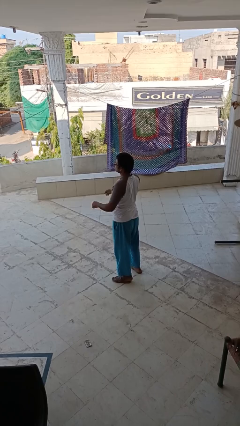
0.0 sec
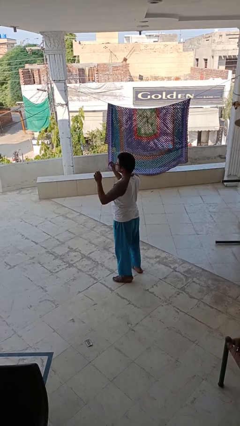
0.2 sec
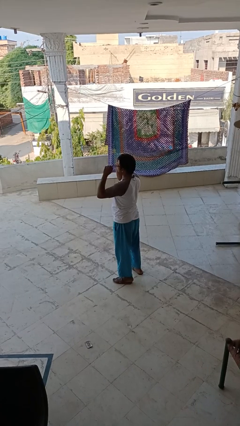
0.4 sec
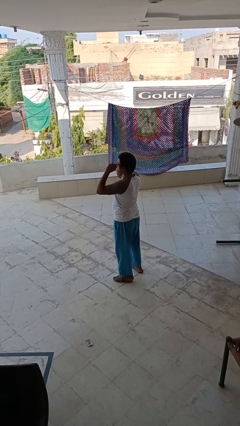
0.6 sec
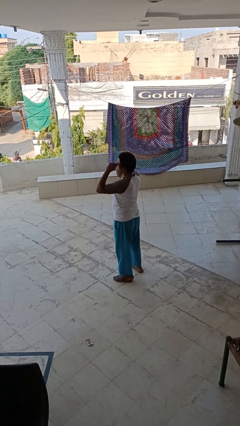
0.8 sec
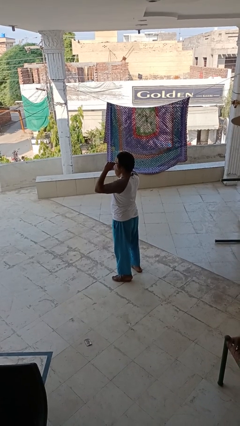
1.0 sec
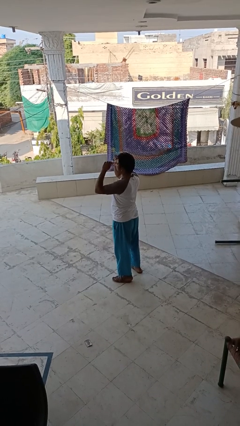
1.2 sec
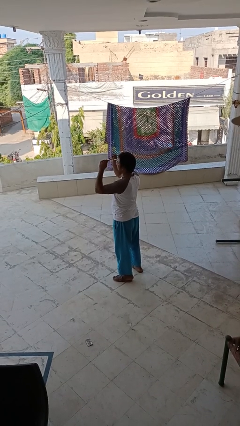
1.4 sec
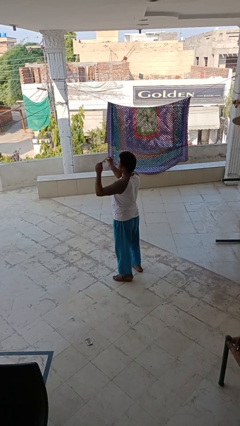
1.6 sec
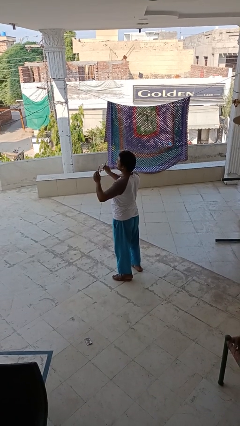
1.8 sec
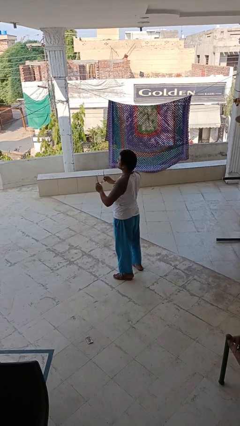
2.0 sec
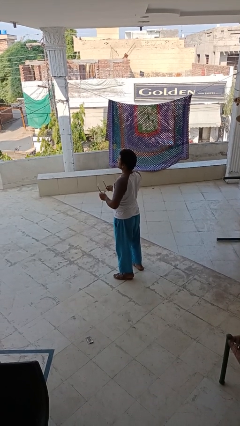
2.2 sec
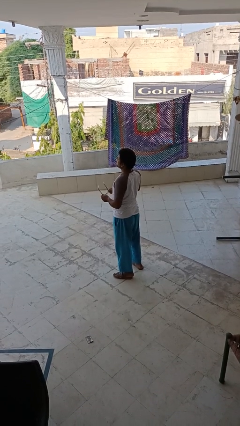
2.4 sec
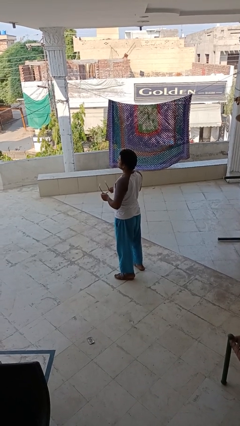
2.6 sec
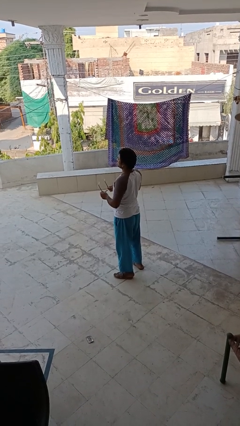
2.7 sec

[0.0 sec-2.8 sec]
person takes off glasses

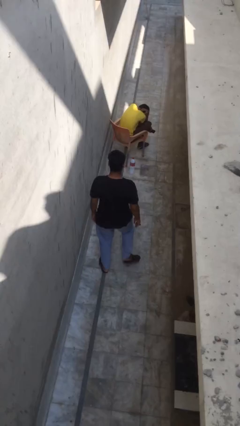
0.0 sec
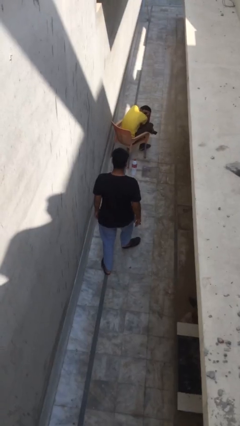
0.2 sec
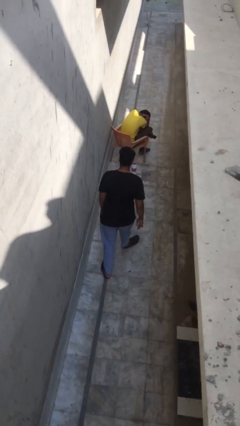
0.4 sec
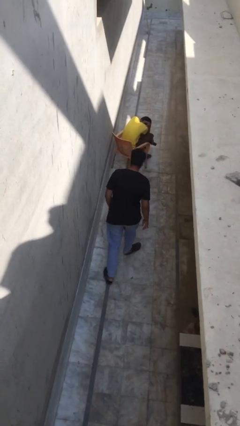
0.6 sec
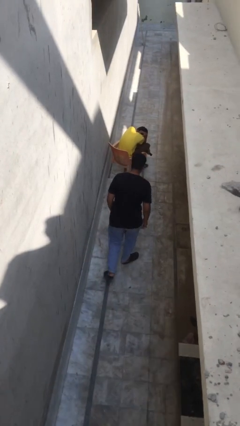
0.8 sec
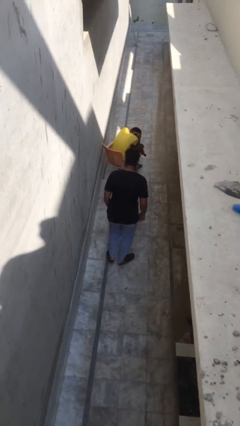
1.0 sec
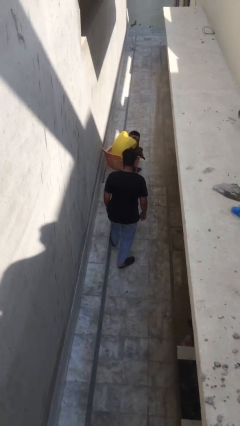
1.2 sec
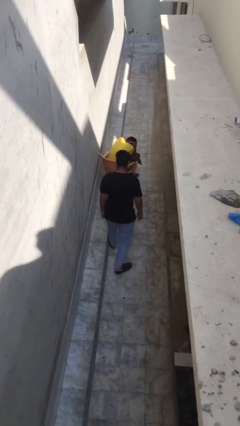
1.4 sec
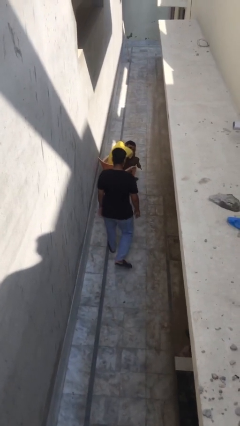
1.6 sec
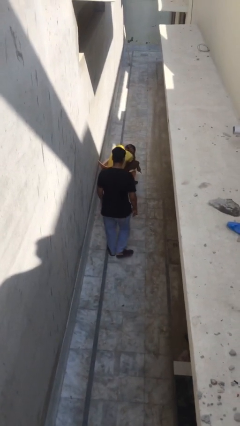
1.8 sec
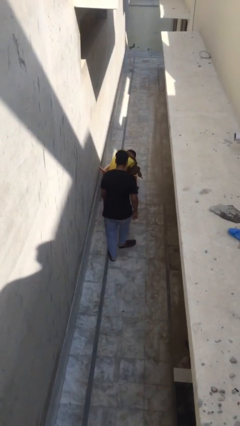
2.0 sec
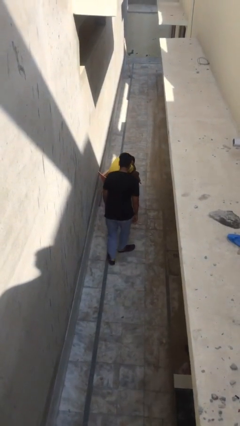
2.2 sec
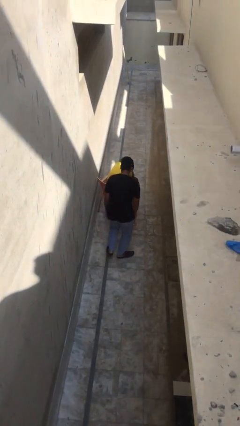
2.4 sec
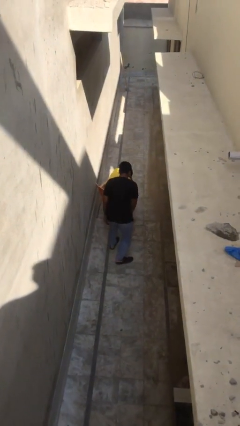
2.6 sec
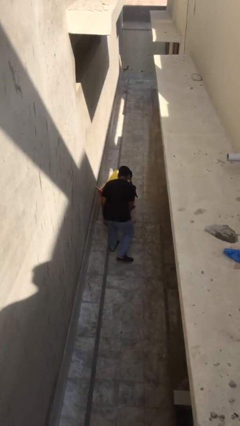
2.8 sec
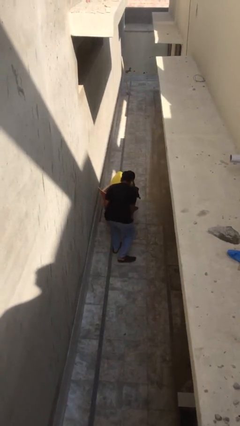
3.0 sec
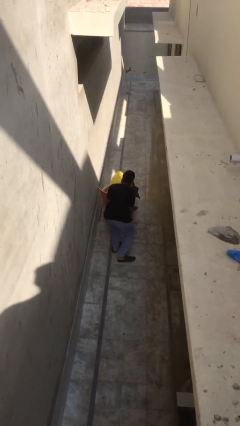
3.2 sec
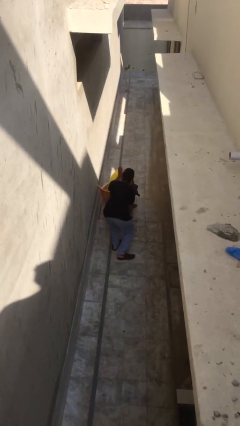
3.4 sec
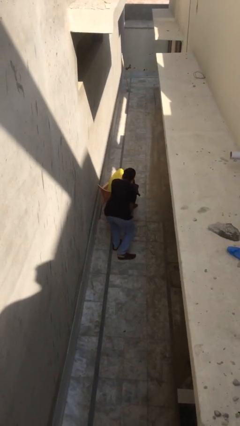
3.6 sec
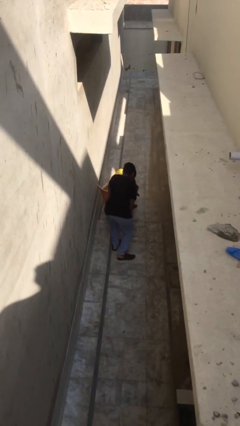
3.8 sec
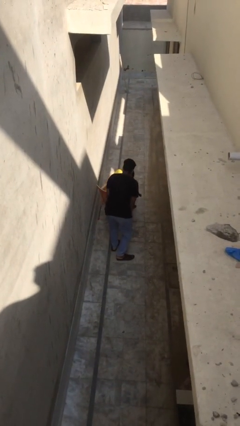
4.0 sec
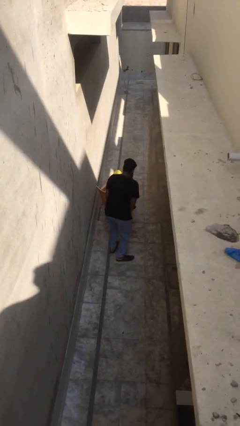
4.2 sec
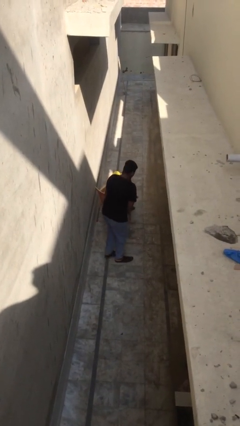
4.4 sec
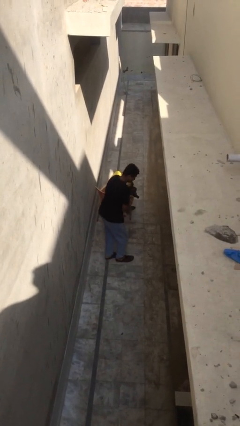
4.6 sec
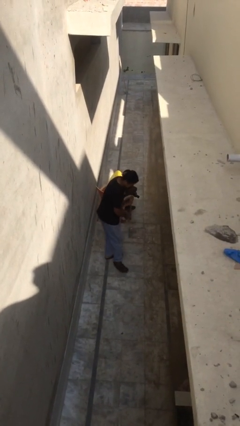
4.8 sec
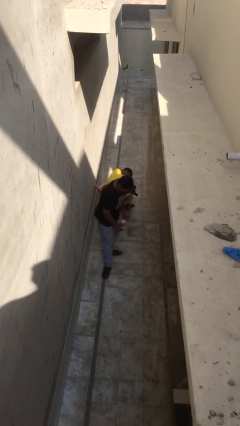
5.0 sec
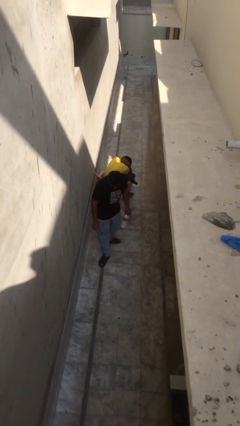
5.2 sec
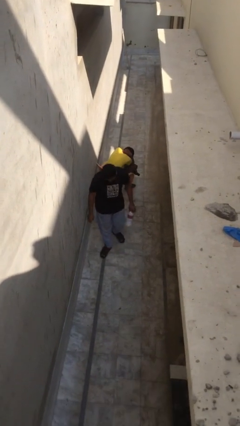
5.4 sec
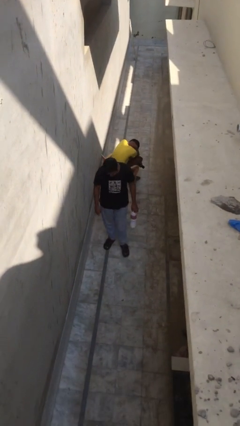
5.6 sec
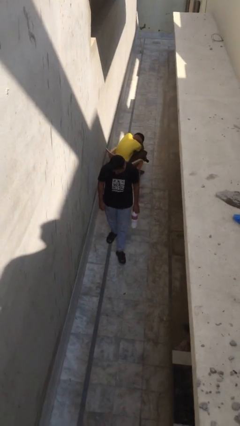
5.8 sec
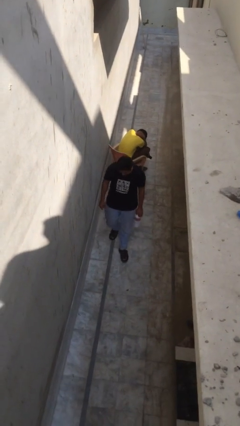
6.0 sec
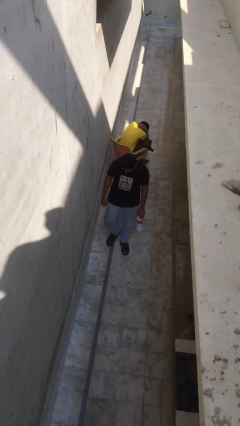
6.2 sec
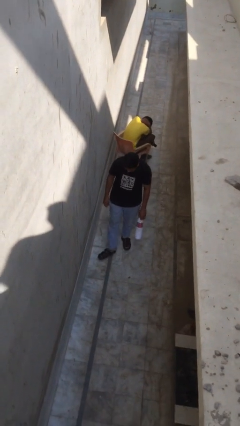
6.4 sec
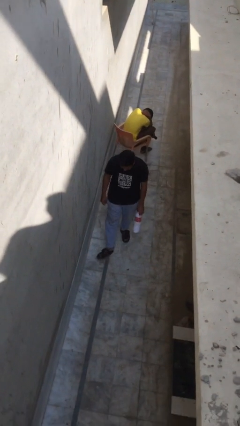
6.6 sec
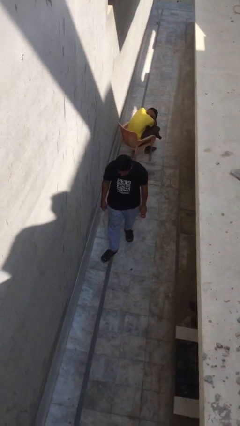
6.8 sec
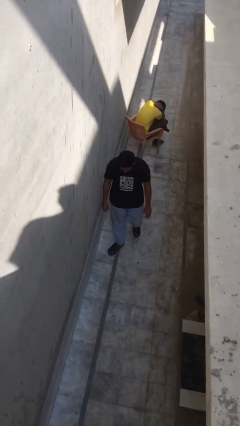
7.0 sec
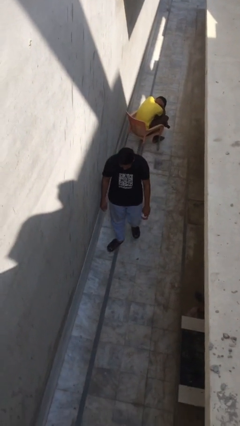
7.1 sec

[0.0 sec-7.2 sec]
person steals object from person

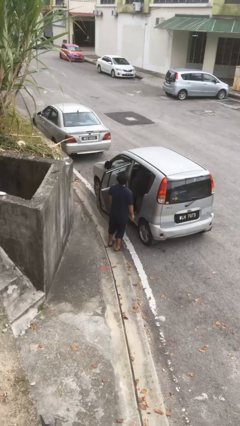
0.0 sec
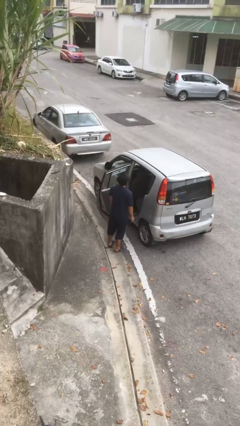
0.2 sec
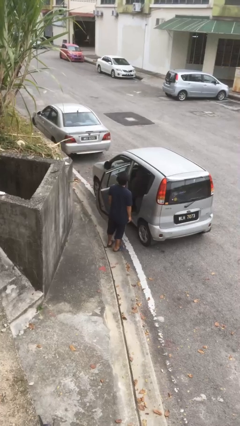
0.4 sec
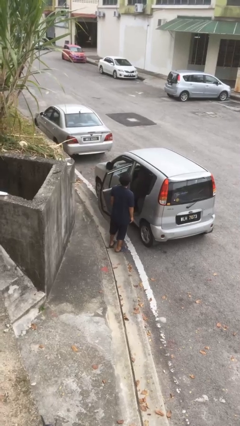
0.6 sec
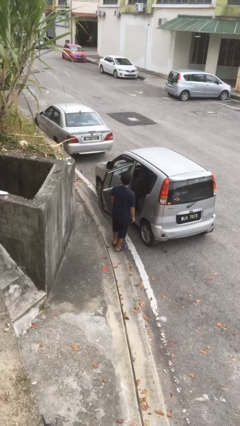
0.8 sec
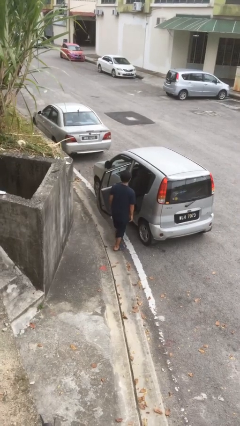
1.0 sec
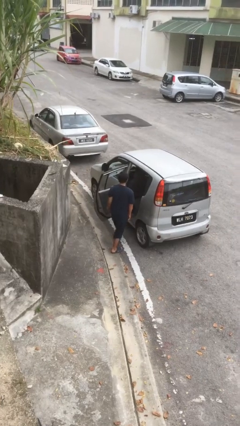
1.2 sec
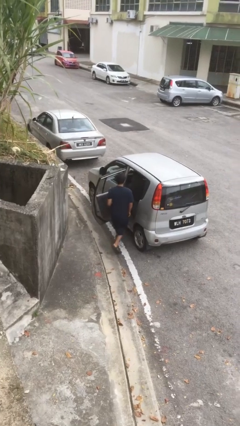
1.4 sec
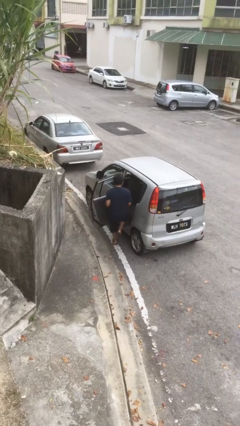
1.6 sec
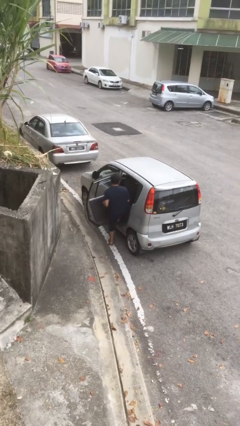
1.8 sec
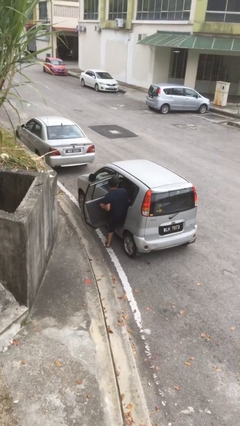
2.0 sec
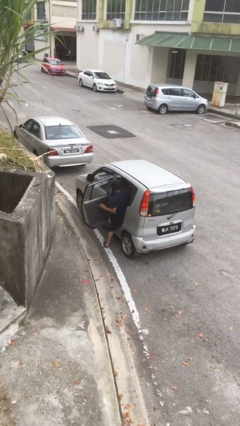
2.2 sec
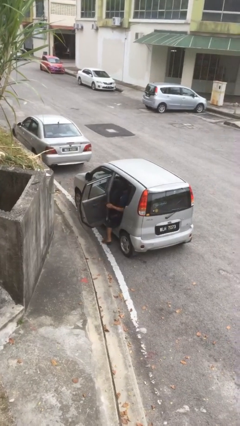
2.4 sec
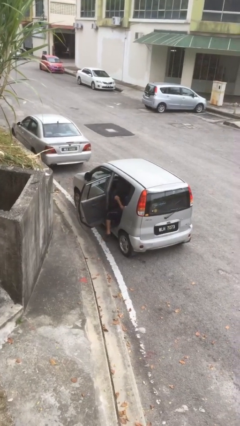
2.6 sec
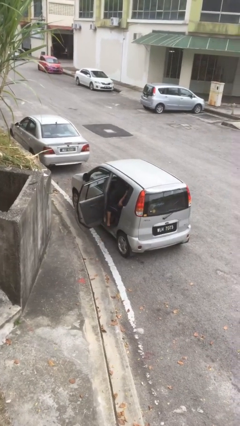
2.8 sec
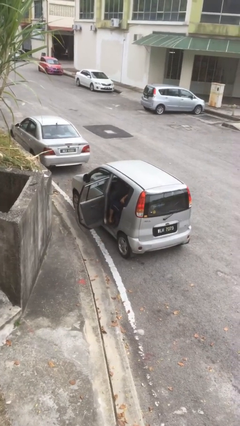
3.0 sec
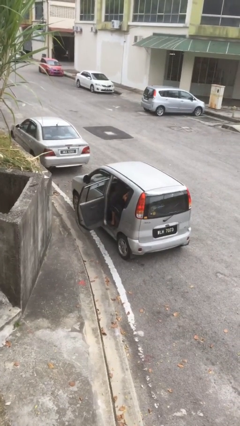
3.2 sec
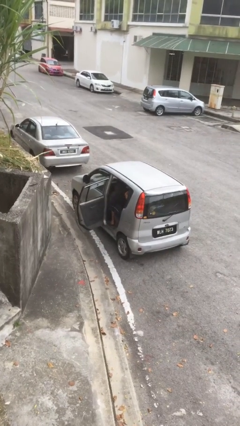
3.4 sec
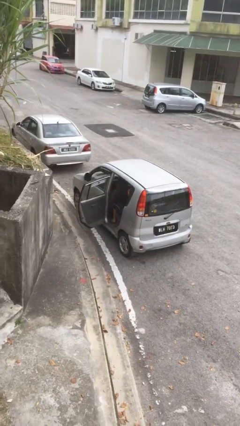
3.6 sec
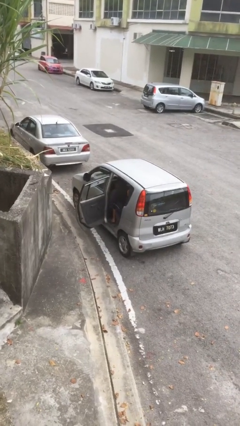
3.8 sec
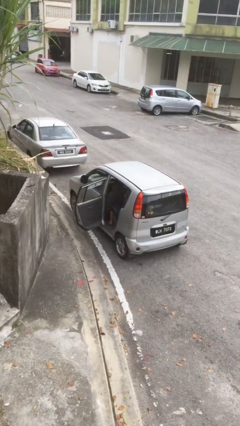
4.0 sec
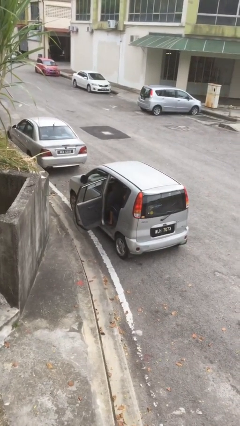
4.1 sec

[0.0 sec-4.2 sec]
person enters car

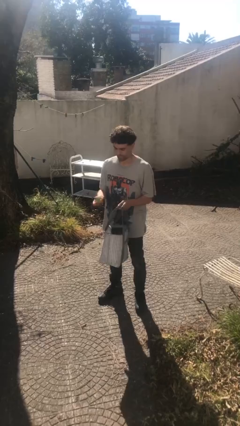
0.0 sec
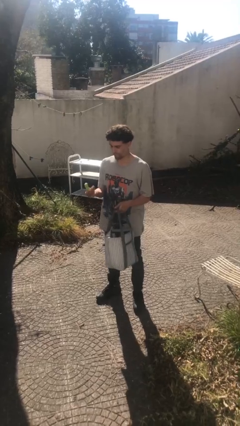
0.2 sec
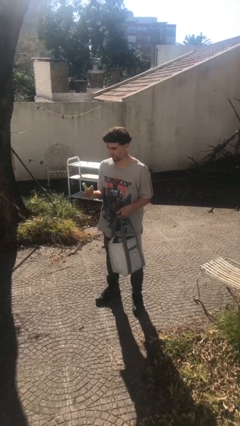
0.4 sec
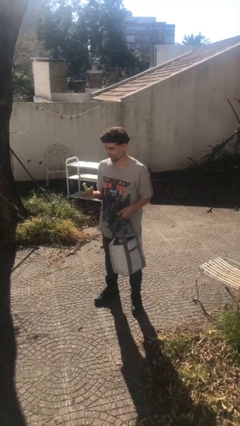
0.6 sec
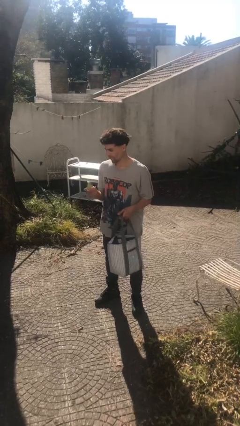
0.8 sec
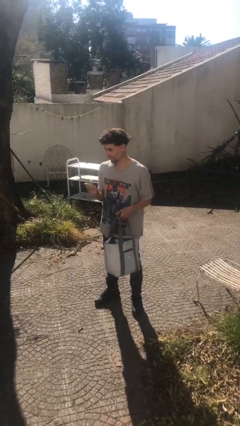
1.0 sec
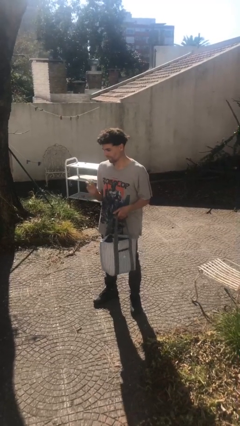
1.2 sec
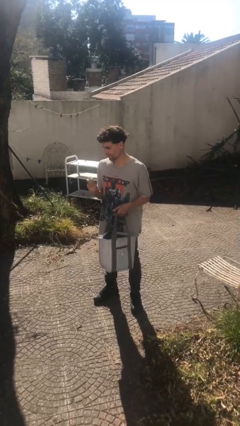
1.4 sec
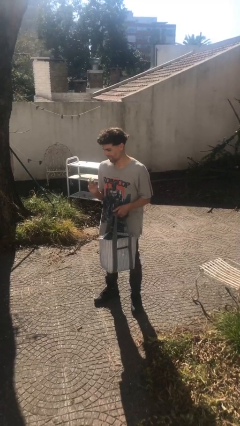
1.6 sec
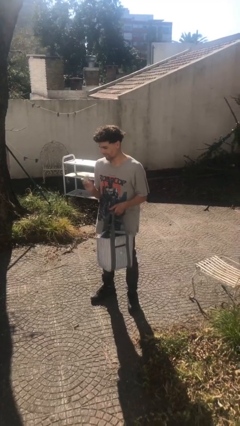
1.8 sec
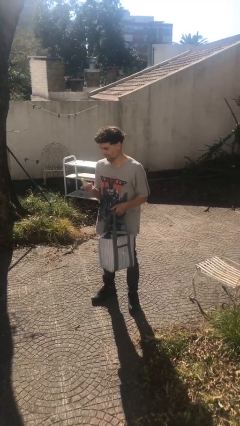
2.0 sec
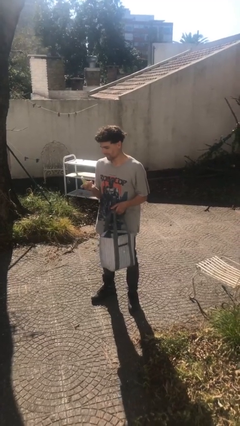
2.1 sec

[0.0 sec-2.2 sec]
person takes object from purse

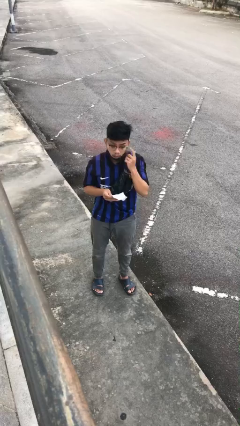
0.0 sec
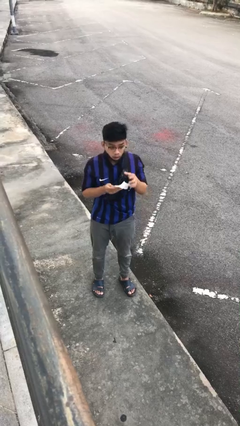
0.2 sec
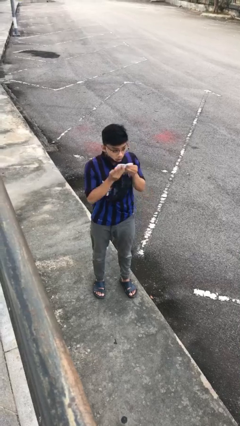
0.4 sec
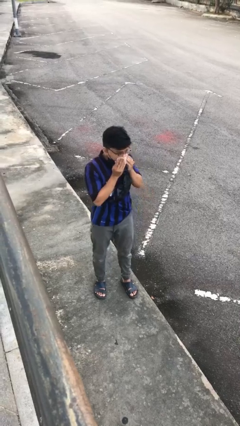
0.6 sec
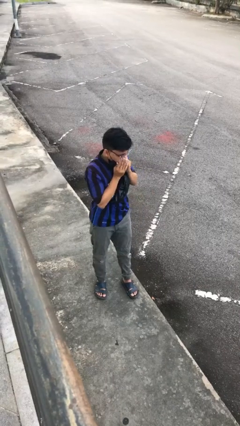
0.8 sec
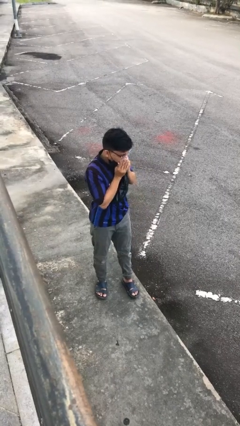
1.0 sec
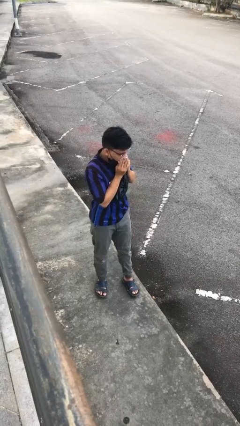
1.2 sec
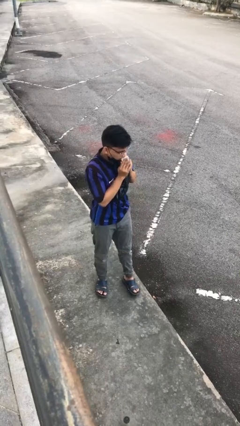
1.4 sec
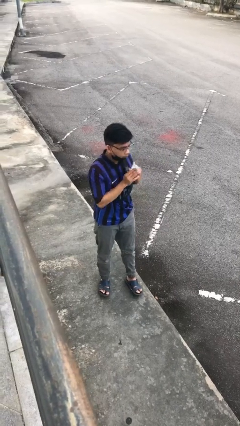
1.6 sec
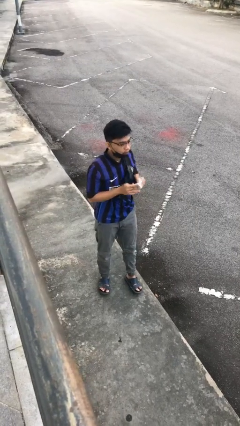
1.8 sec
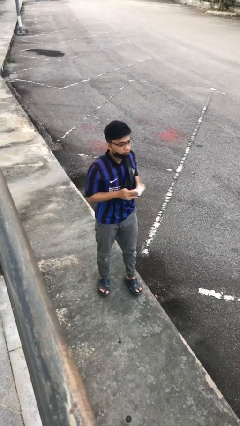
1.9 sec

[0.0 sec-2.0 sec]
person blows nose
